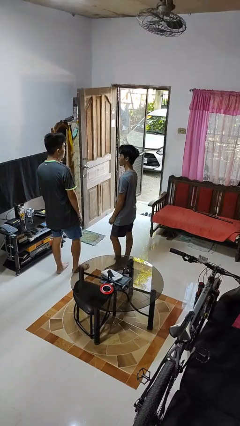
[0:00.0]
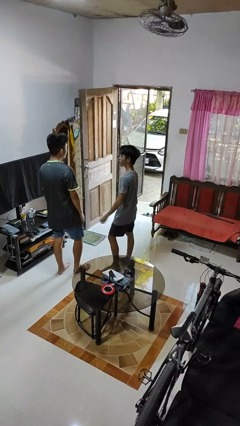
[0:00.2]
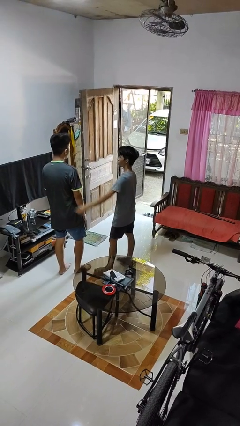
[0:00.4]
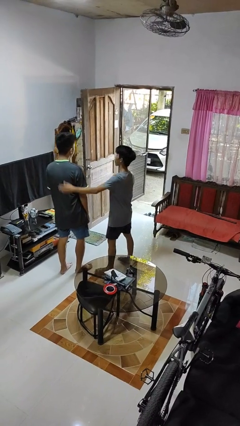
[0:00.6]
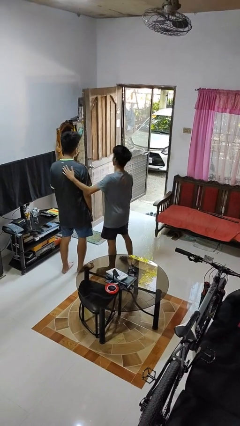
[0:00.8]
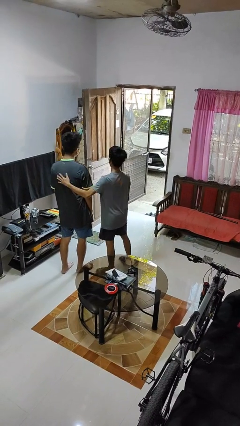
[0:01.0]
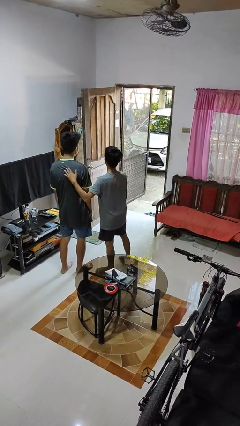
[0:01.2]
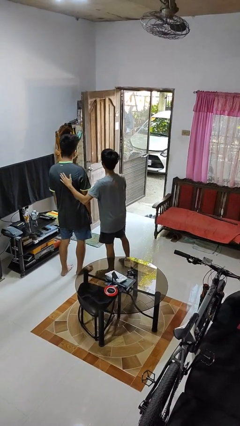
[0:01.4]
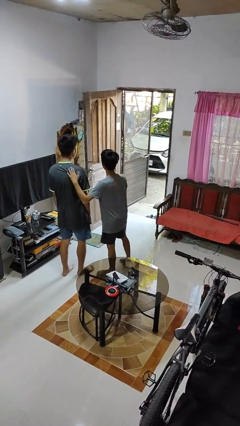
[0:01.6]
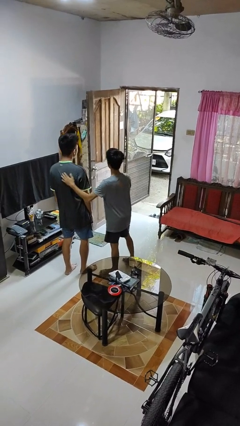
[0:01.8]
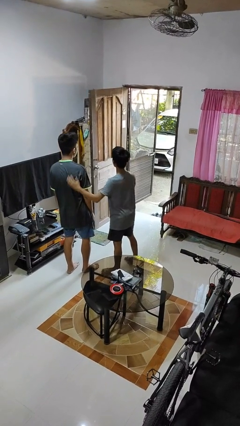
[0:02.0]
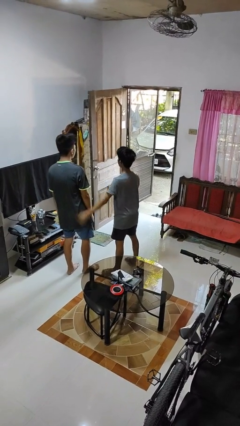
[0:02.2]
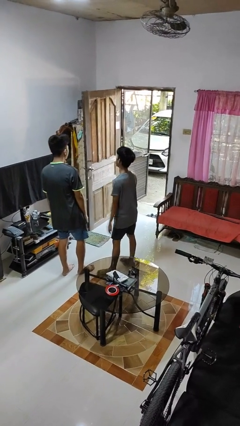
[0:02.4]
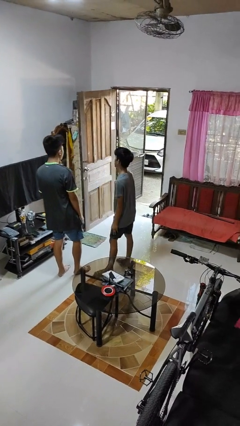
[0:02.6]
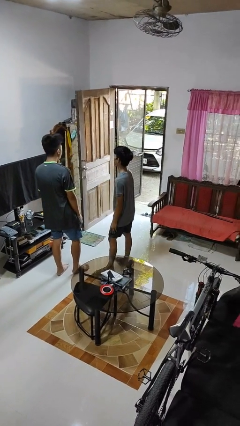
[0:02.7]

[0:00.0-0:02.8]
person touches back of person

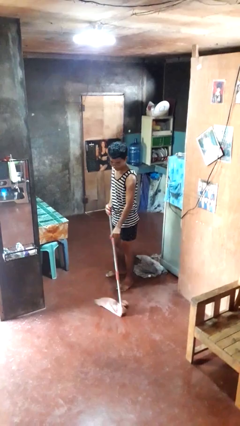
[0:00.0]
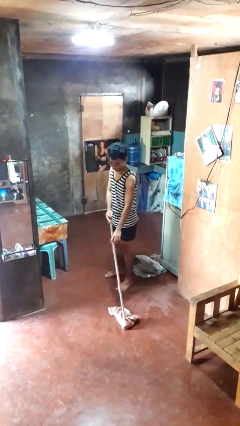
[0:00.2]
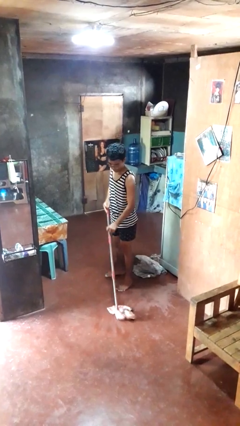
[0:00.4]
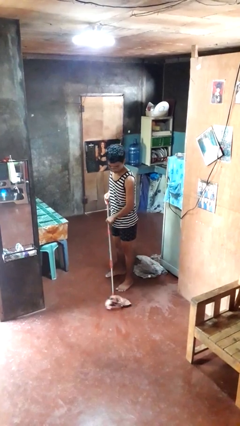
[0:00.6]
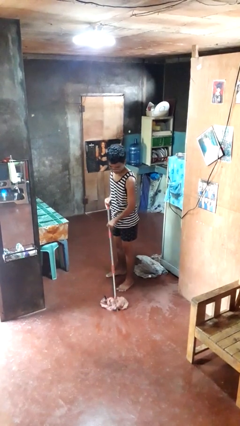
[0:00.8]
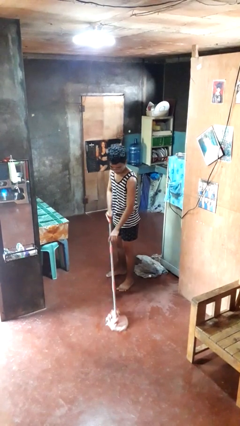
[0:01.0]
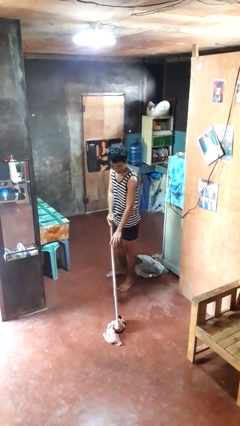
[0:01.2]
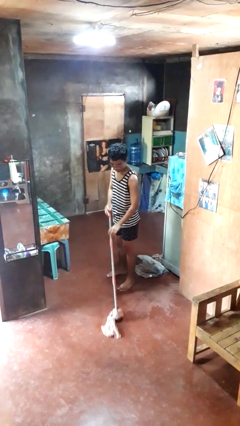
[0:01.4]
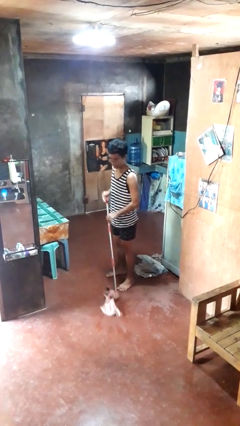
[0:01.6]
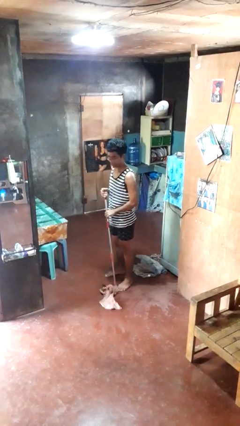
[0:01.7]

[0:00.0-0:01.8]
person mops

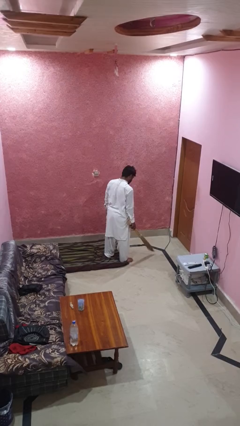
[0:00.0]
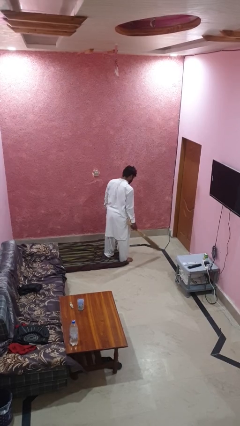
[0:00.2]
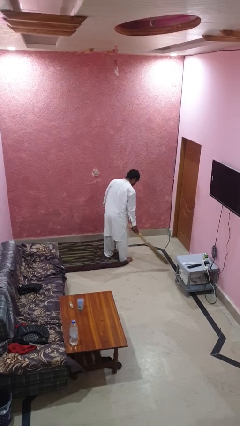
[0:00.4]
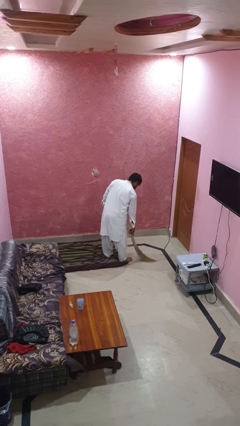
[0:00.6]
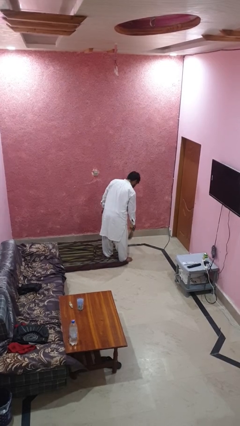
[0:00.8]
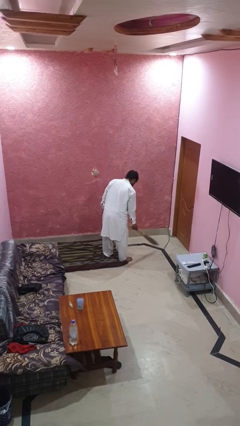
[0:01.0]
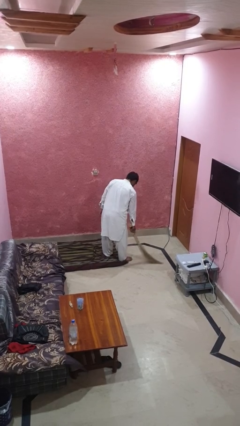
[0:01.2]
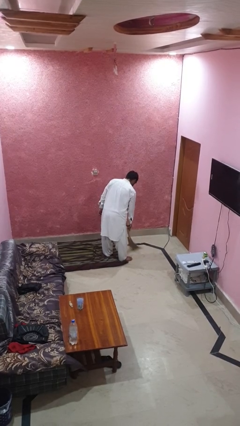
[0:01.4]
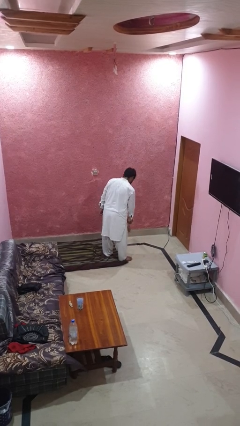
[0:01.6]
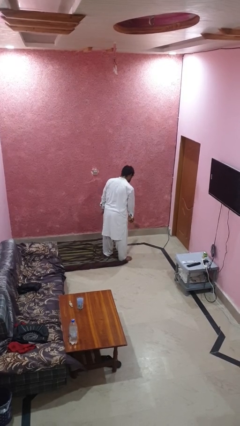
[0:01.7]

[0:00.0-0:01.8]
person sweeps floor

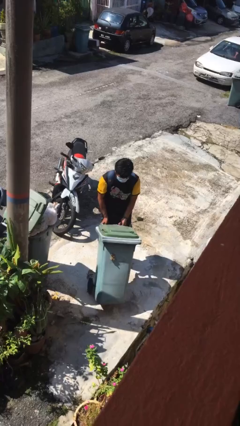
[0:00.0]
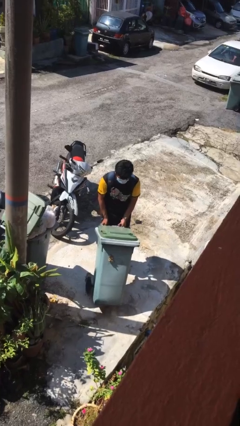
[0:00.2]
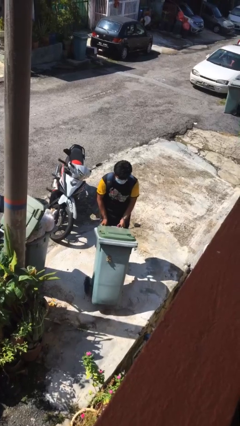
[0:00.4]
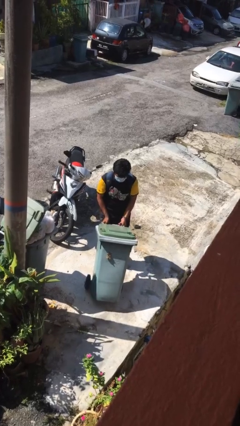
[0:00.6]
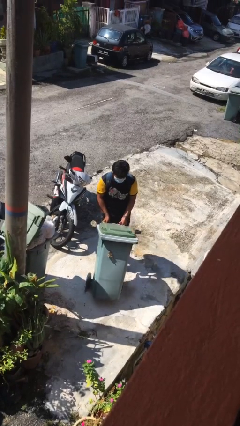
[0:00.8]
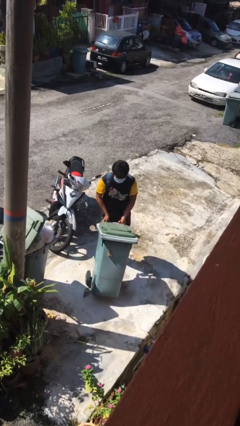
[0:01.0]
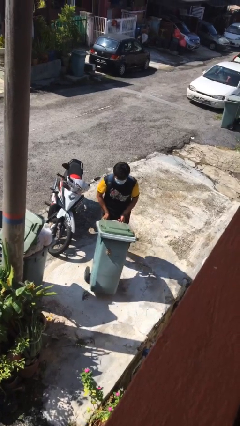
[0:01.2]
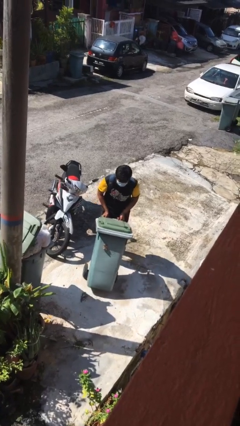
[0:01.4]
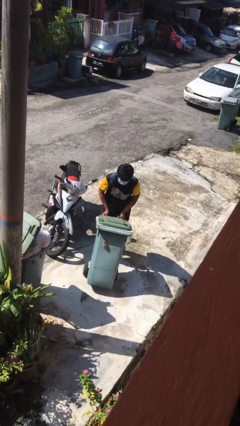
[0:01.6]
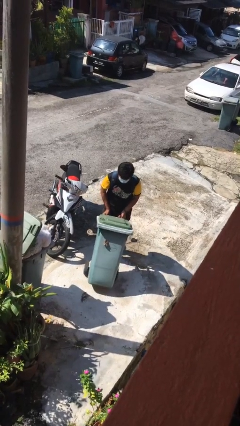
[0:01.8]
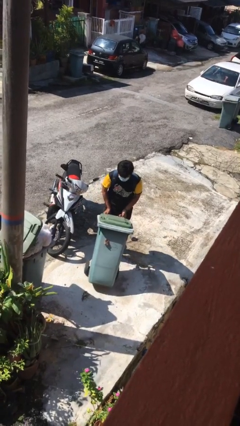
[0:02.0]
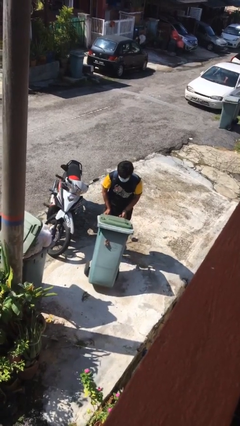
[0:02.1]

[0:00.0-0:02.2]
person pulls wheeled trashcan

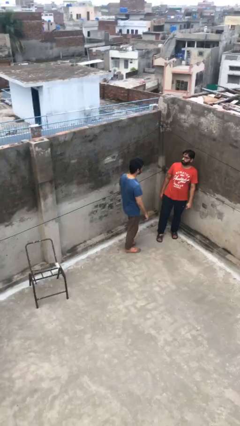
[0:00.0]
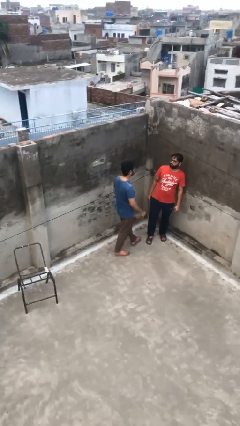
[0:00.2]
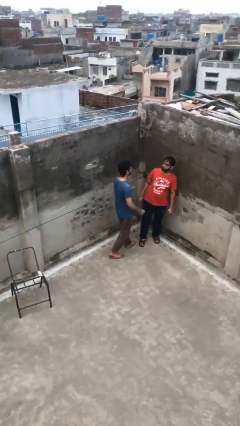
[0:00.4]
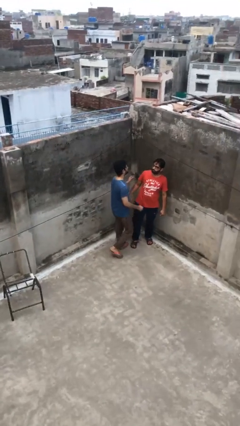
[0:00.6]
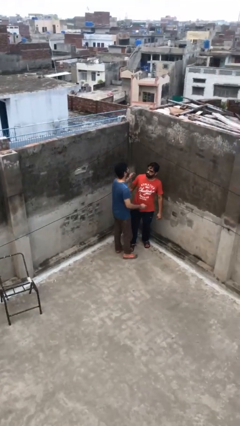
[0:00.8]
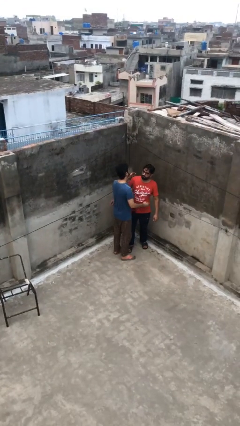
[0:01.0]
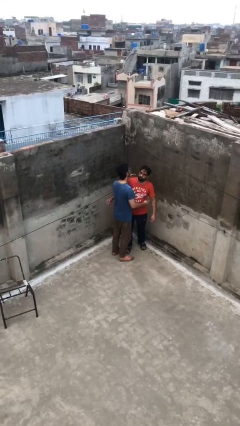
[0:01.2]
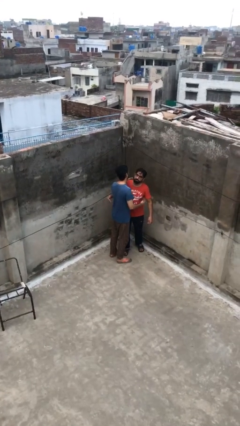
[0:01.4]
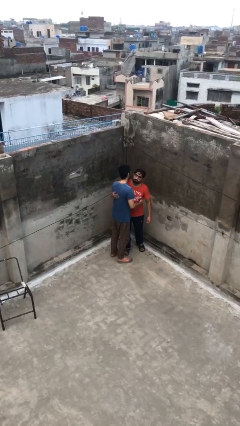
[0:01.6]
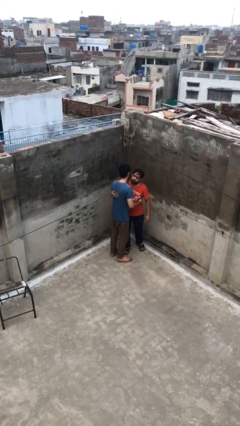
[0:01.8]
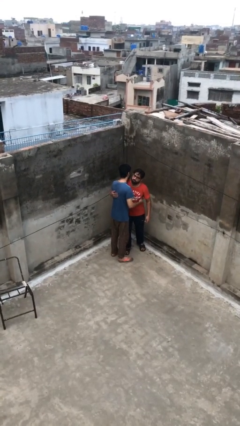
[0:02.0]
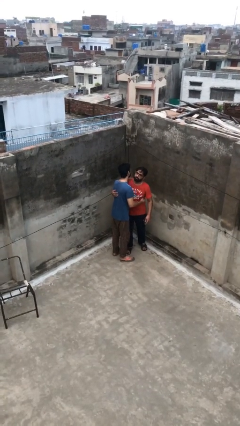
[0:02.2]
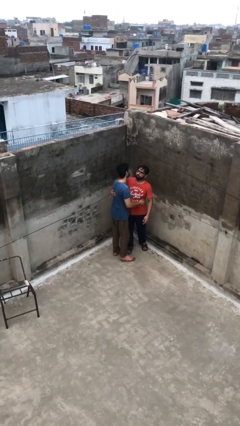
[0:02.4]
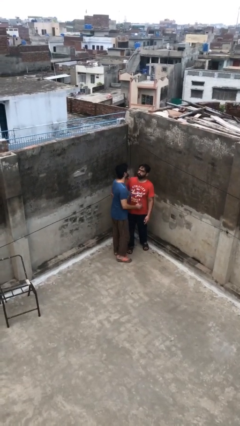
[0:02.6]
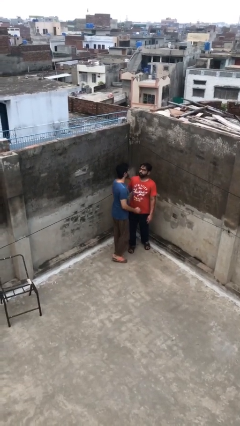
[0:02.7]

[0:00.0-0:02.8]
person embraces person

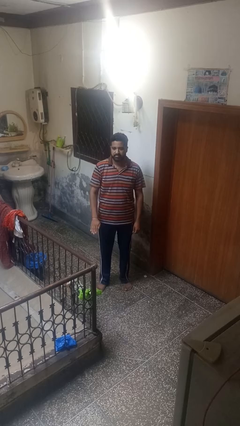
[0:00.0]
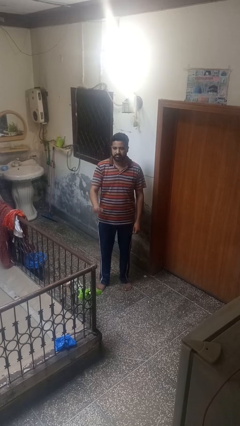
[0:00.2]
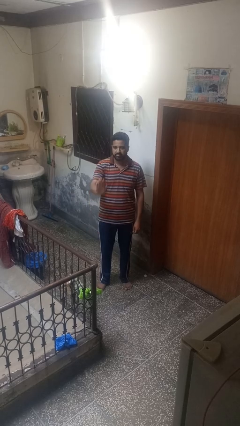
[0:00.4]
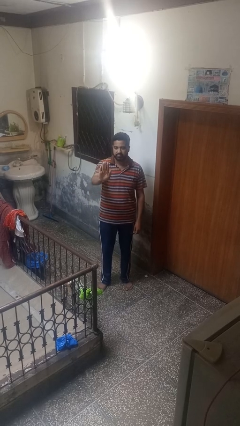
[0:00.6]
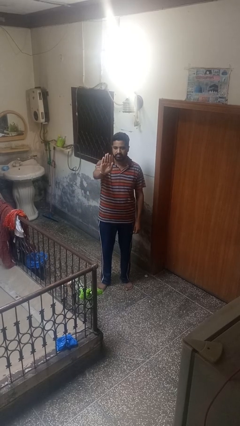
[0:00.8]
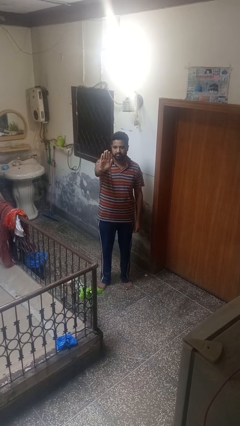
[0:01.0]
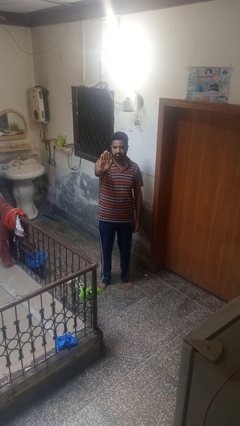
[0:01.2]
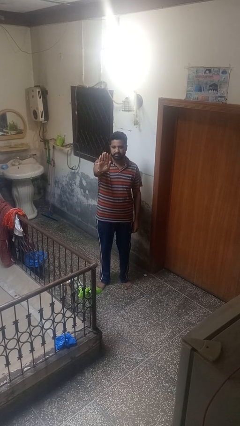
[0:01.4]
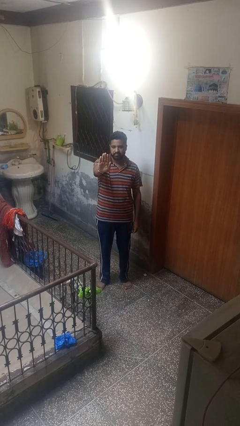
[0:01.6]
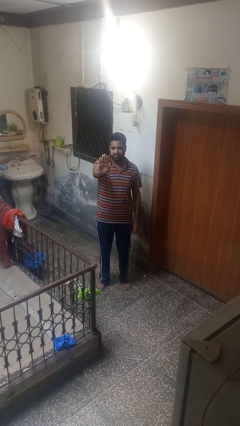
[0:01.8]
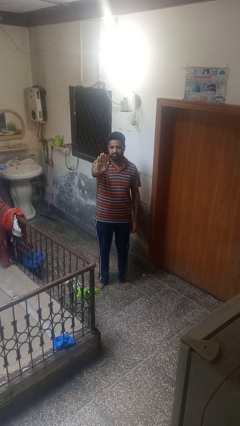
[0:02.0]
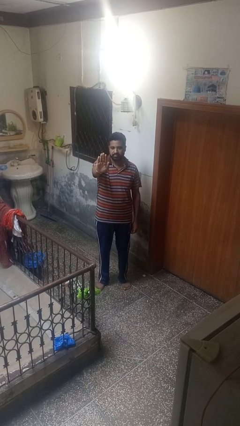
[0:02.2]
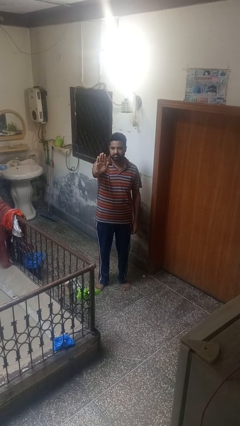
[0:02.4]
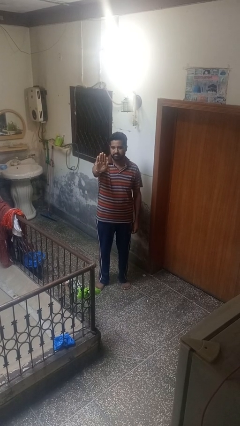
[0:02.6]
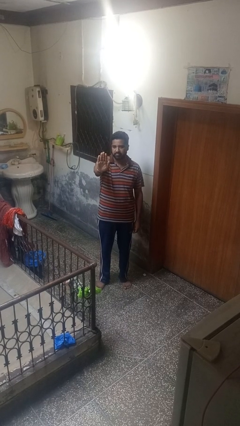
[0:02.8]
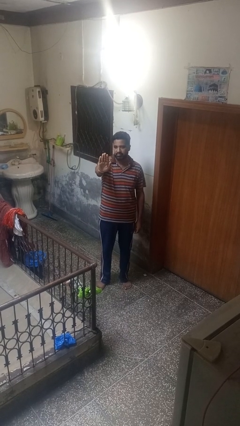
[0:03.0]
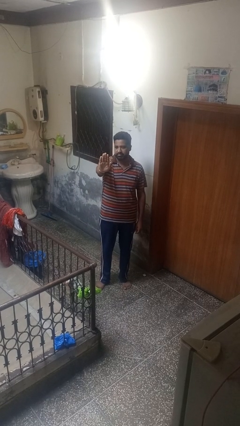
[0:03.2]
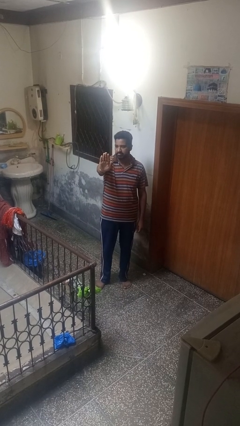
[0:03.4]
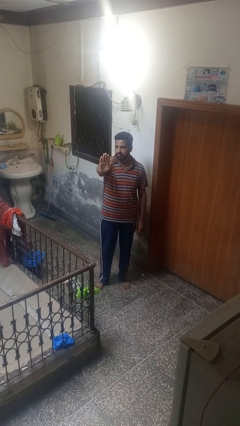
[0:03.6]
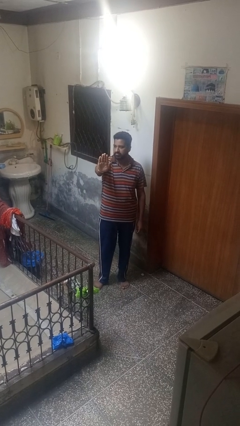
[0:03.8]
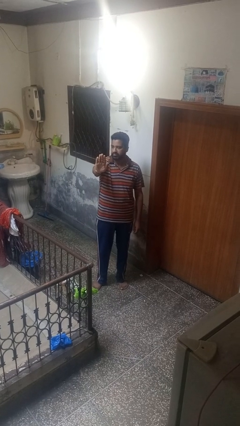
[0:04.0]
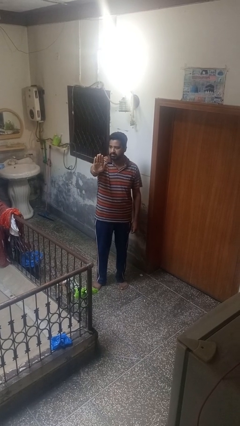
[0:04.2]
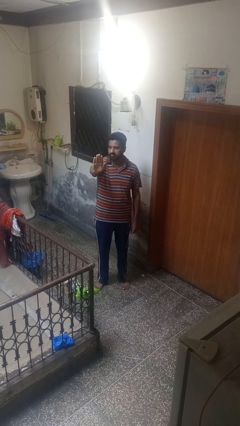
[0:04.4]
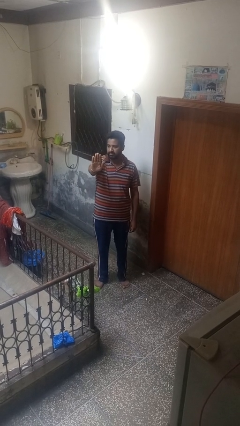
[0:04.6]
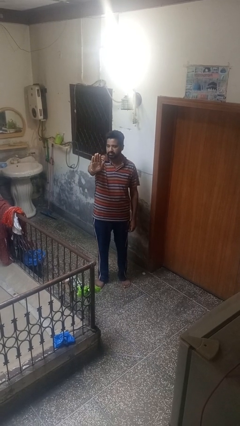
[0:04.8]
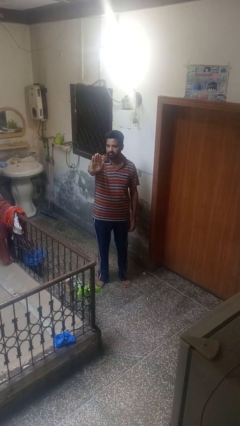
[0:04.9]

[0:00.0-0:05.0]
person gestures stop

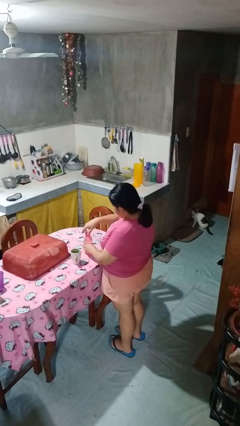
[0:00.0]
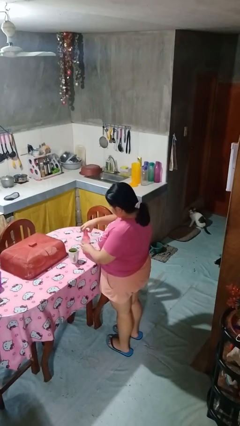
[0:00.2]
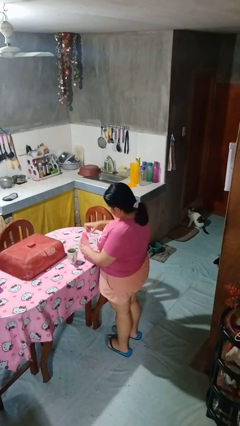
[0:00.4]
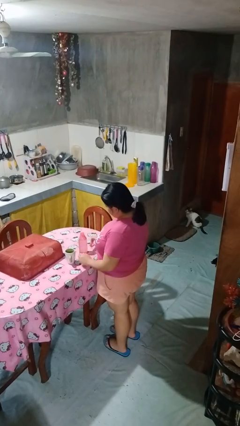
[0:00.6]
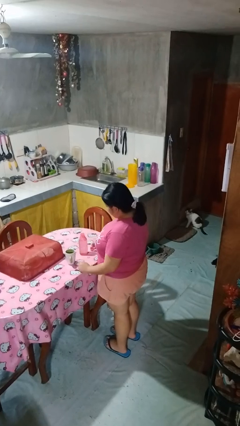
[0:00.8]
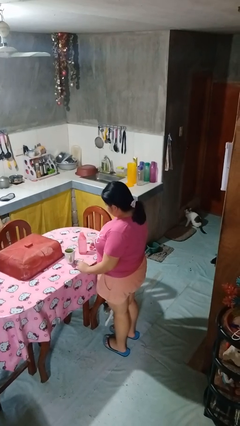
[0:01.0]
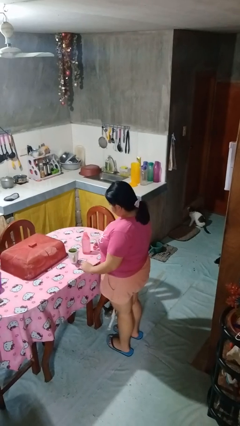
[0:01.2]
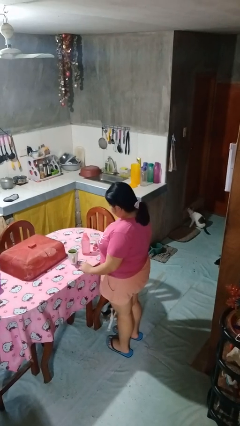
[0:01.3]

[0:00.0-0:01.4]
person unscrews lid from bottle
